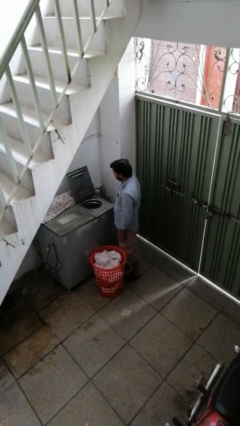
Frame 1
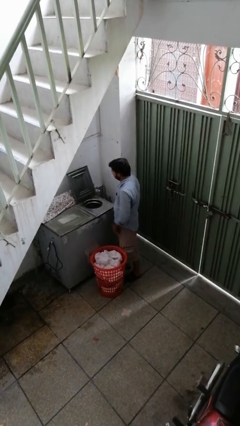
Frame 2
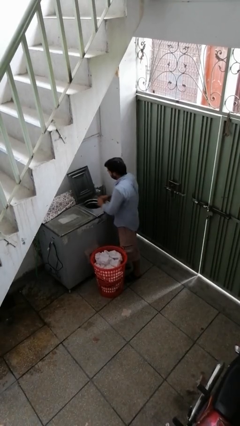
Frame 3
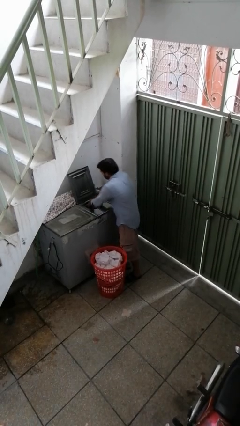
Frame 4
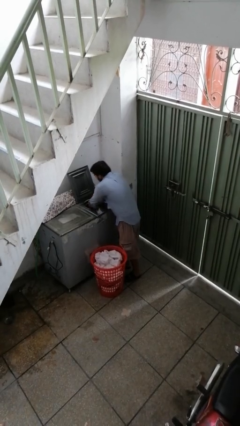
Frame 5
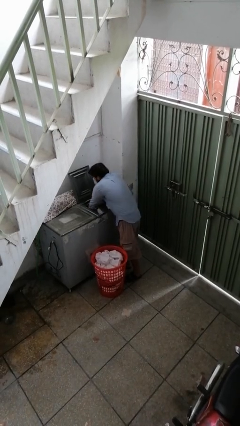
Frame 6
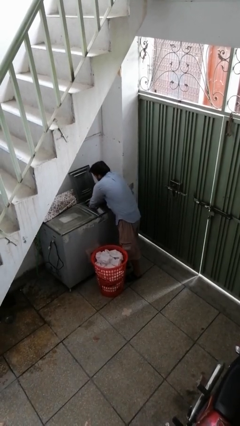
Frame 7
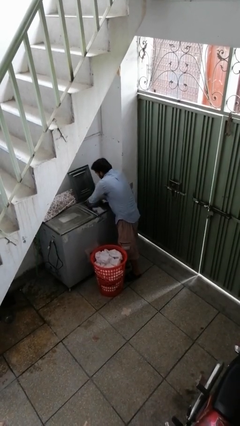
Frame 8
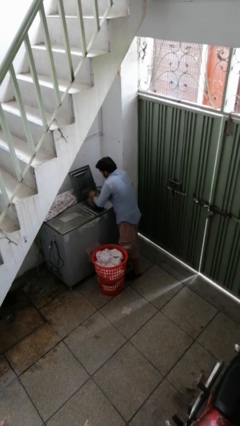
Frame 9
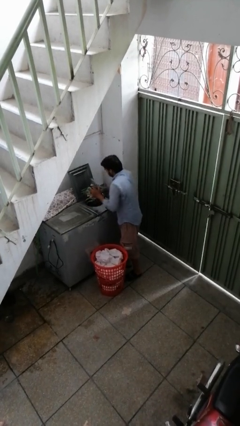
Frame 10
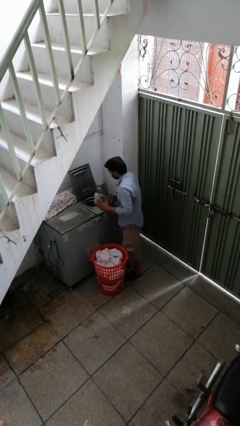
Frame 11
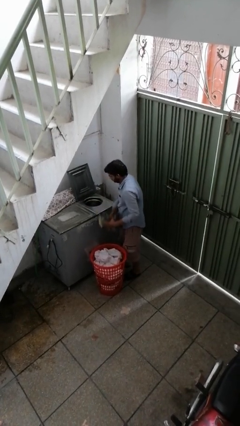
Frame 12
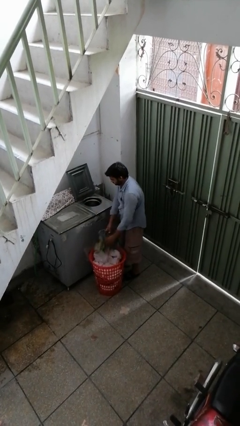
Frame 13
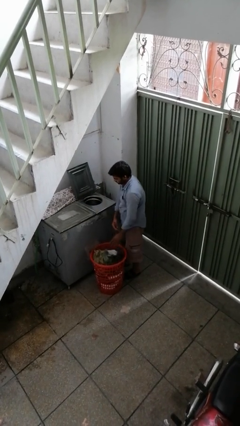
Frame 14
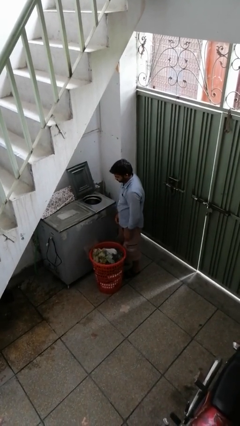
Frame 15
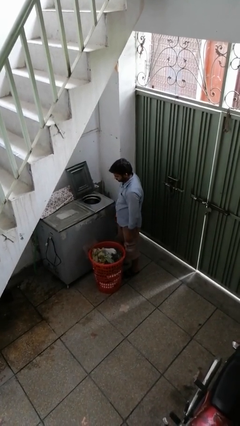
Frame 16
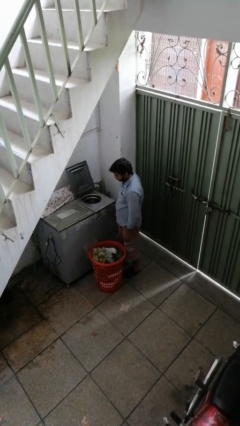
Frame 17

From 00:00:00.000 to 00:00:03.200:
person unloads dryer

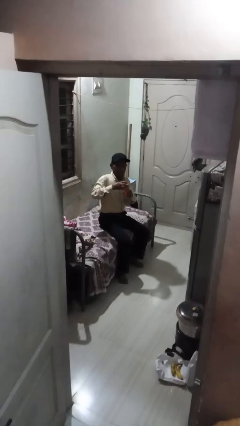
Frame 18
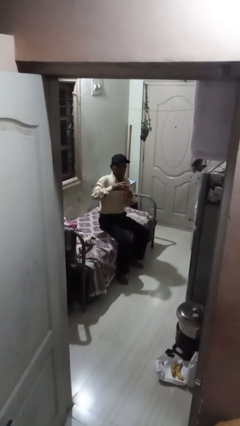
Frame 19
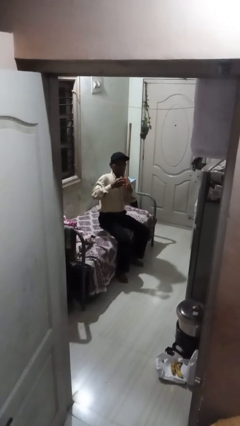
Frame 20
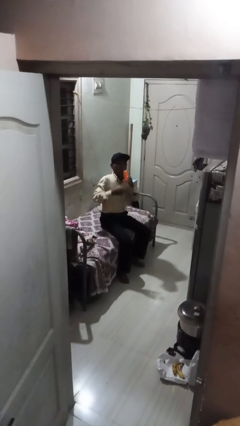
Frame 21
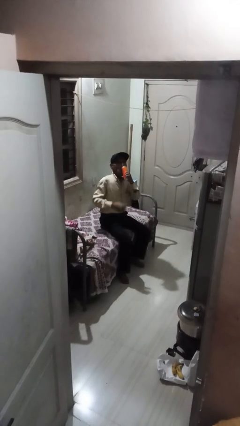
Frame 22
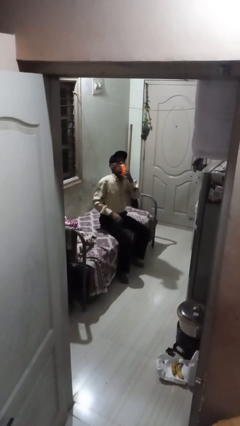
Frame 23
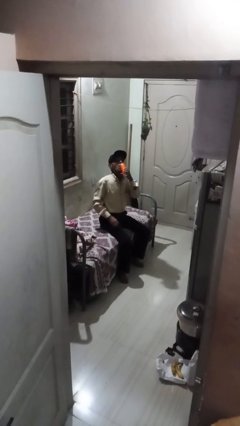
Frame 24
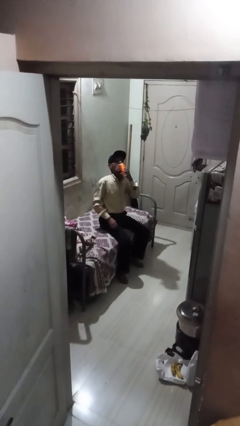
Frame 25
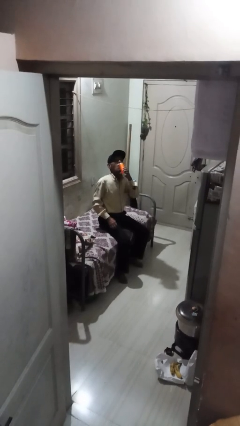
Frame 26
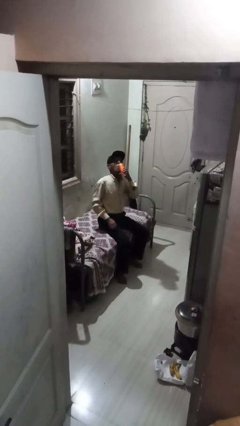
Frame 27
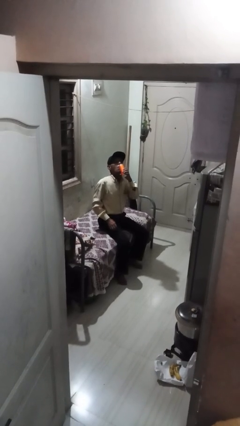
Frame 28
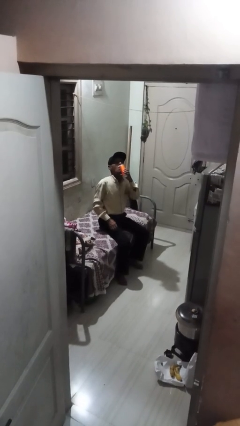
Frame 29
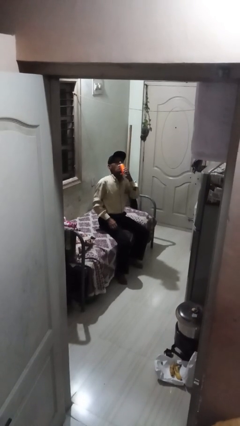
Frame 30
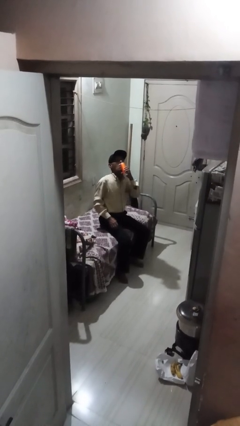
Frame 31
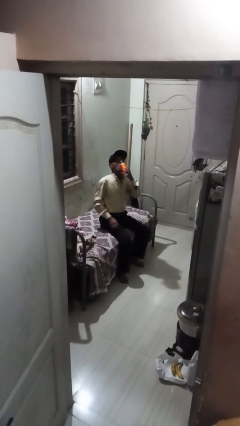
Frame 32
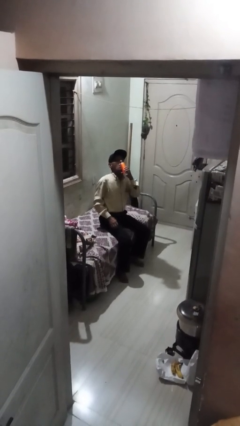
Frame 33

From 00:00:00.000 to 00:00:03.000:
person drinks from beverage can

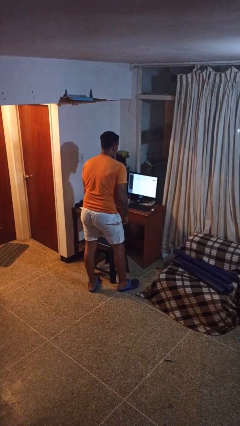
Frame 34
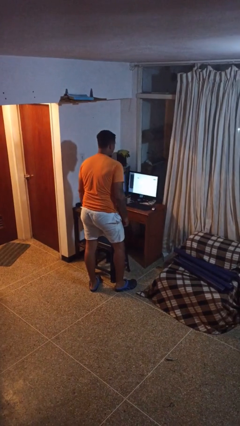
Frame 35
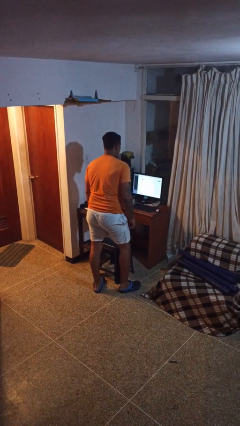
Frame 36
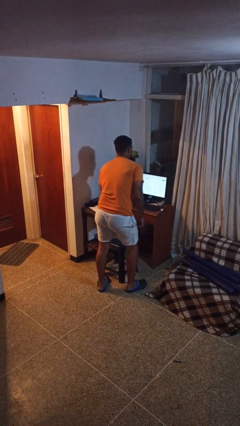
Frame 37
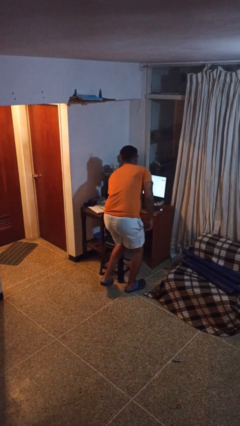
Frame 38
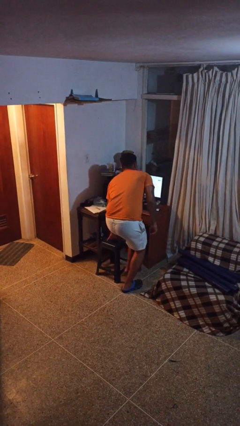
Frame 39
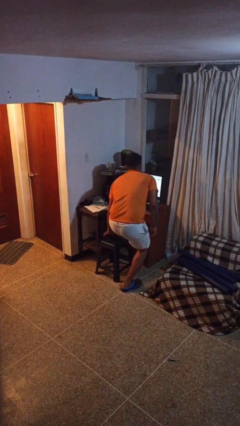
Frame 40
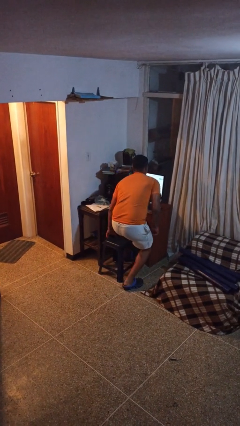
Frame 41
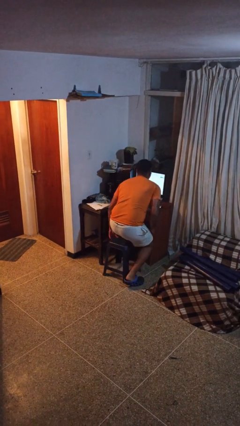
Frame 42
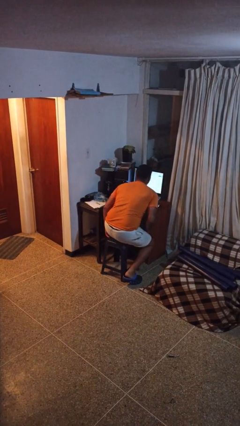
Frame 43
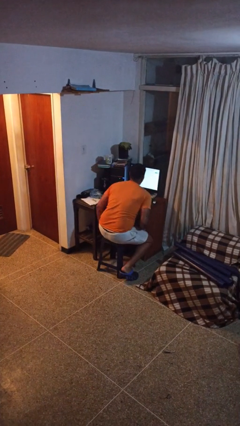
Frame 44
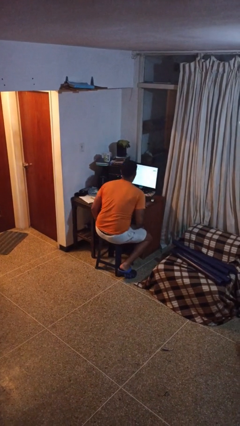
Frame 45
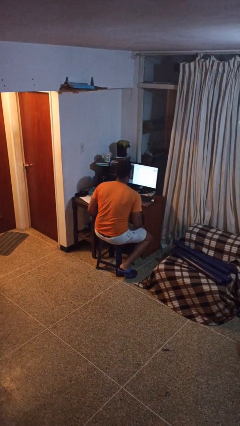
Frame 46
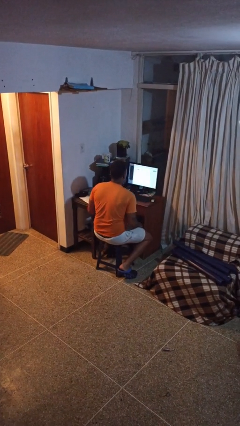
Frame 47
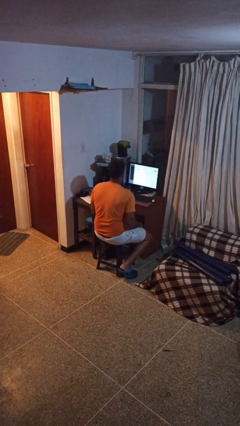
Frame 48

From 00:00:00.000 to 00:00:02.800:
person sits down

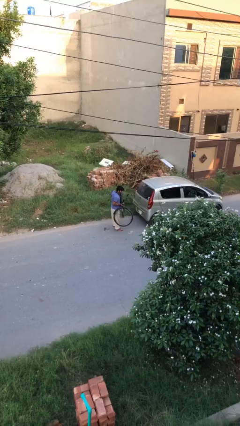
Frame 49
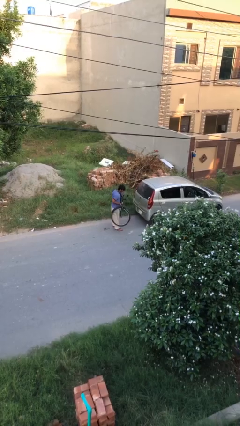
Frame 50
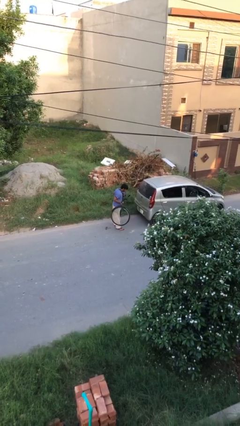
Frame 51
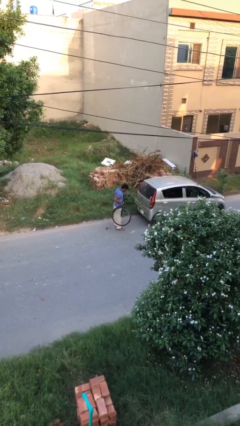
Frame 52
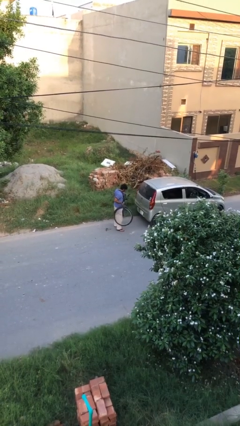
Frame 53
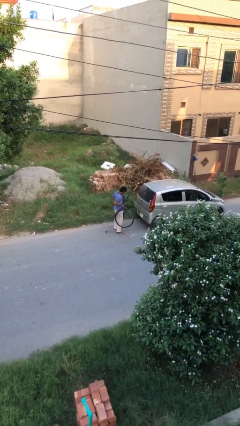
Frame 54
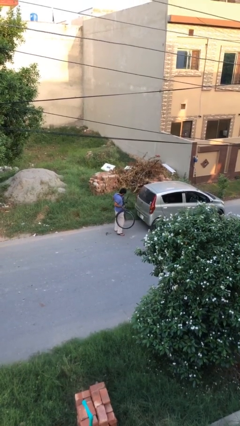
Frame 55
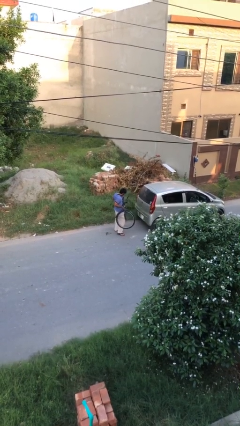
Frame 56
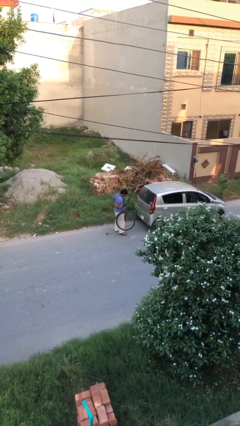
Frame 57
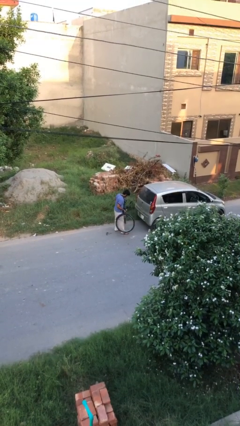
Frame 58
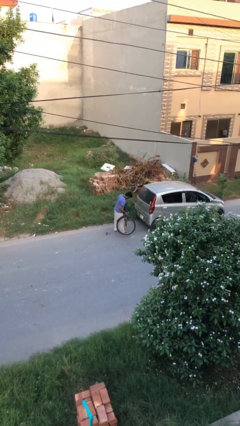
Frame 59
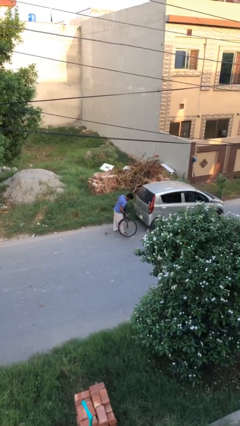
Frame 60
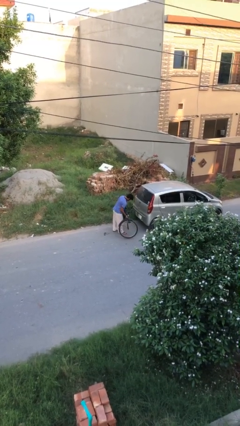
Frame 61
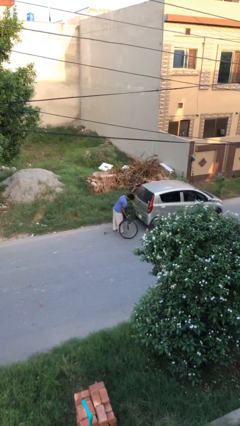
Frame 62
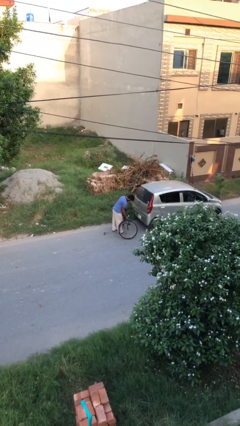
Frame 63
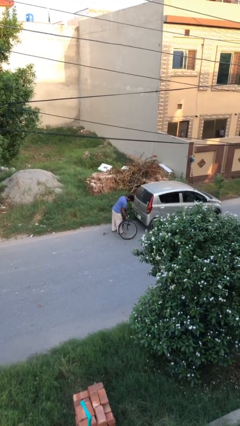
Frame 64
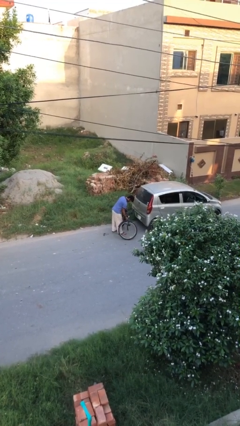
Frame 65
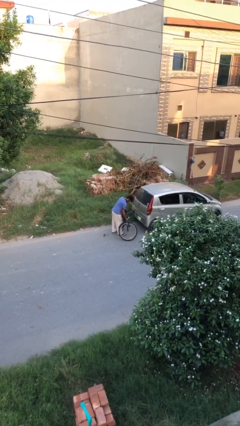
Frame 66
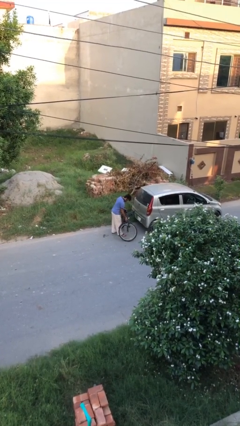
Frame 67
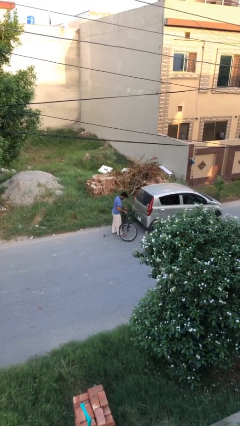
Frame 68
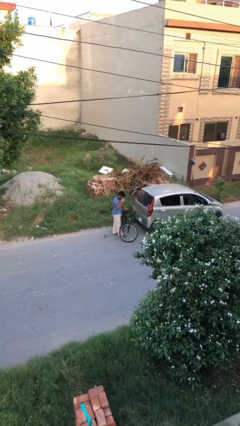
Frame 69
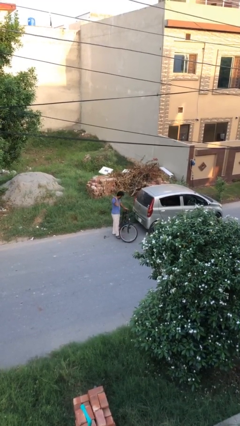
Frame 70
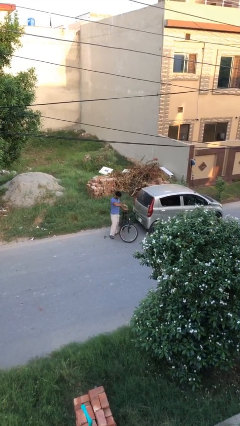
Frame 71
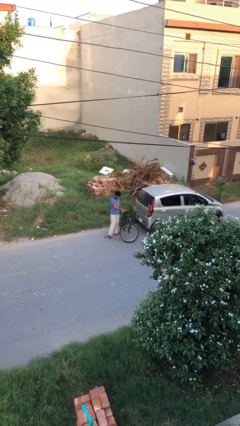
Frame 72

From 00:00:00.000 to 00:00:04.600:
person puts down object on floor

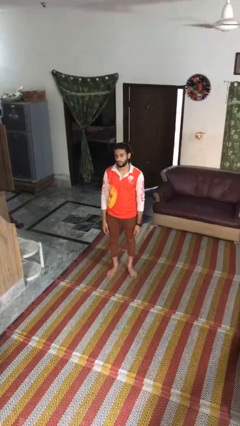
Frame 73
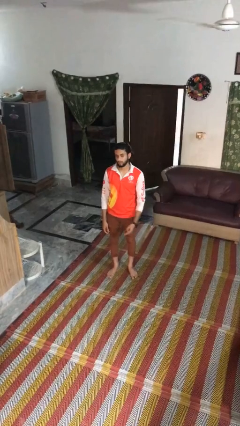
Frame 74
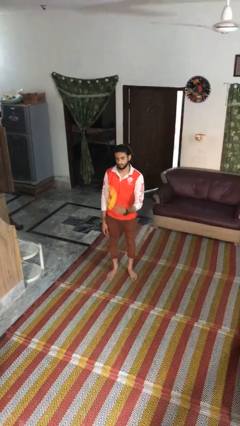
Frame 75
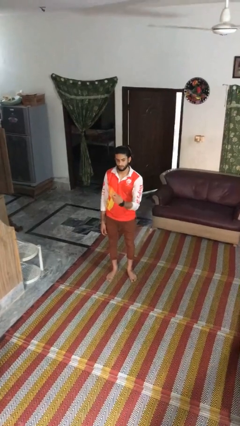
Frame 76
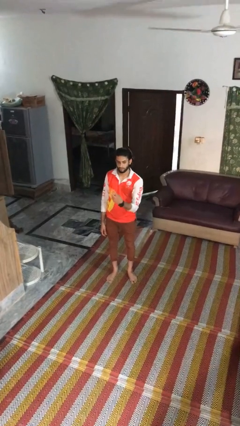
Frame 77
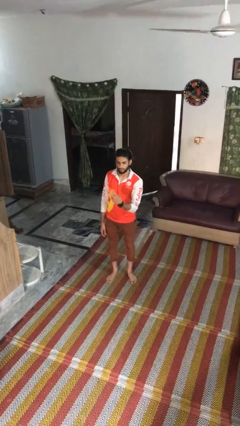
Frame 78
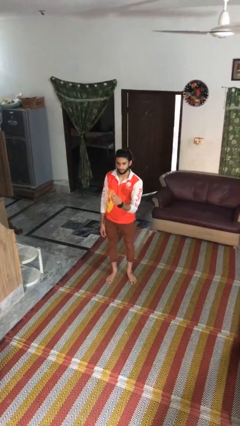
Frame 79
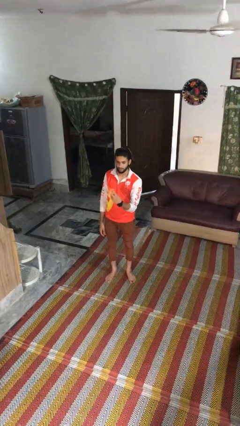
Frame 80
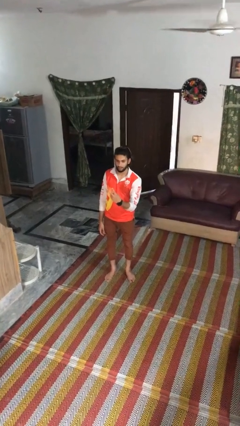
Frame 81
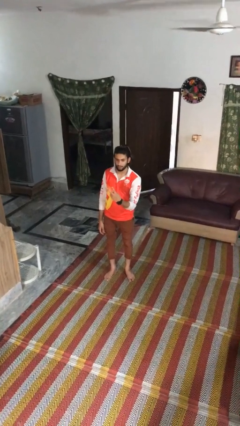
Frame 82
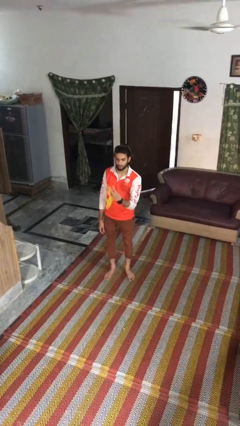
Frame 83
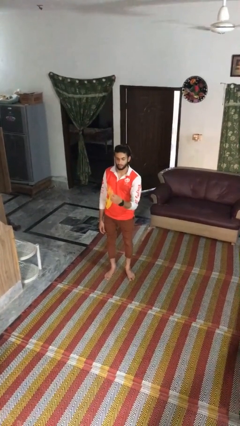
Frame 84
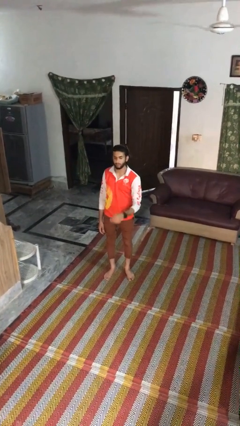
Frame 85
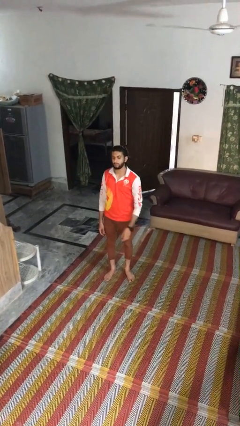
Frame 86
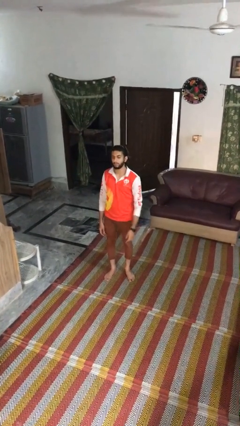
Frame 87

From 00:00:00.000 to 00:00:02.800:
person gestures peace

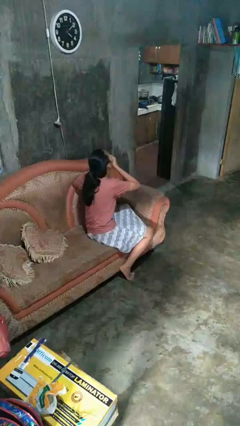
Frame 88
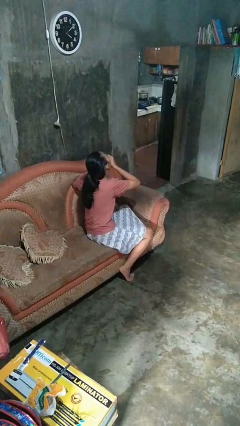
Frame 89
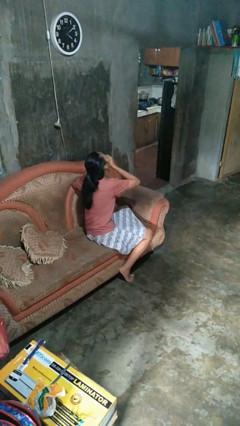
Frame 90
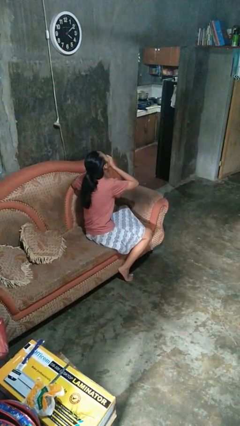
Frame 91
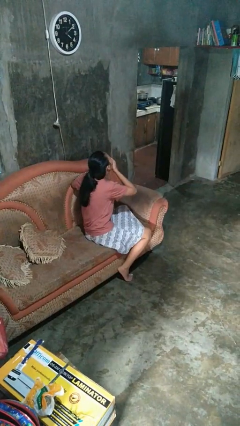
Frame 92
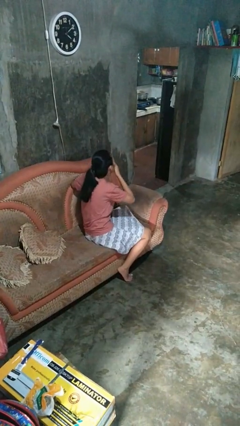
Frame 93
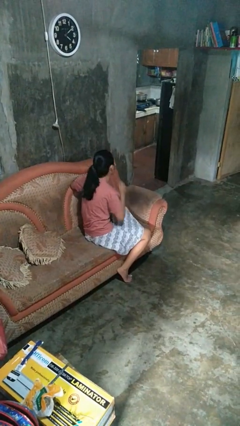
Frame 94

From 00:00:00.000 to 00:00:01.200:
person yawns
